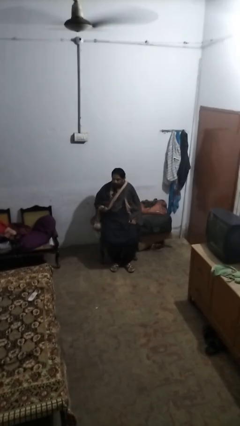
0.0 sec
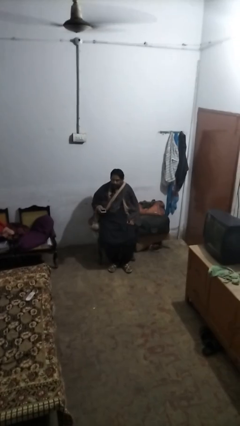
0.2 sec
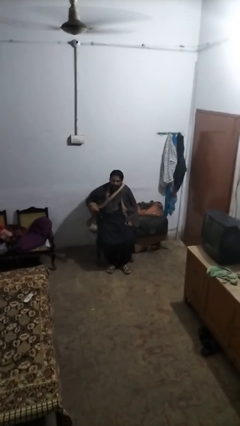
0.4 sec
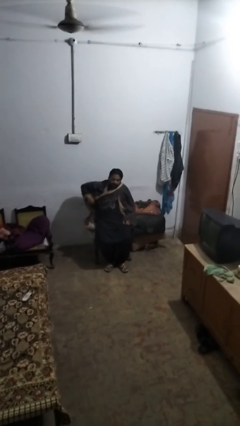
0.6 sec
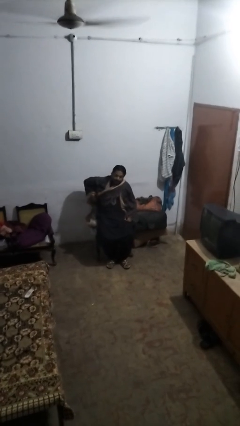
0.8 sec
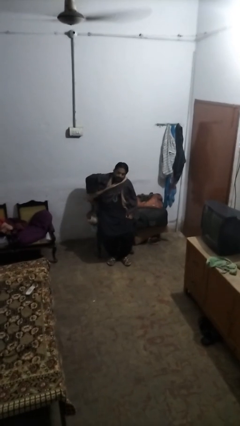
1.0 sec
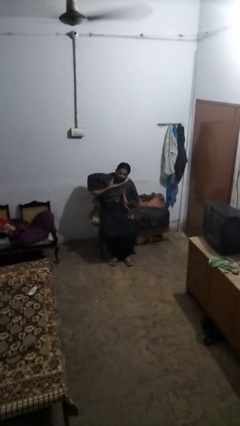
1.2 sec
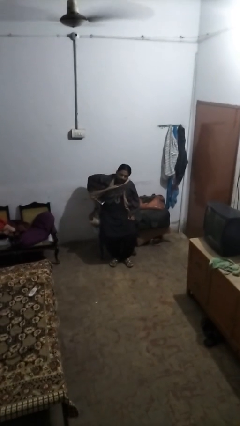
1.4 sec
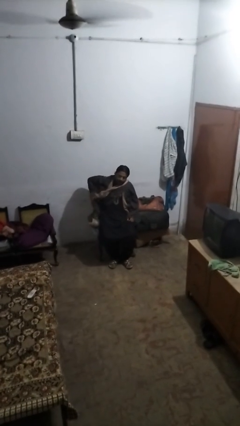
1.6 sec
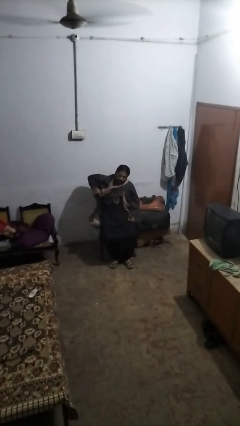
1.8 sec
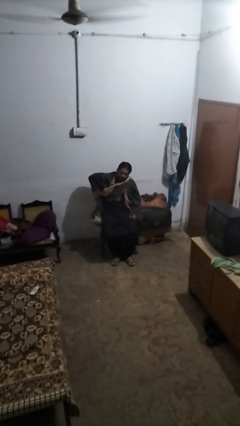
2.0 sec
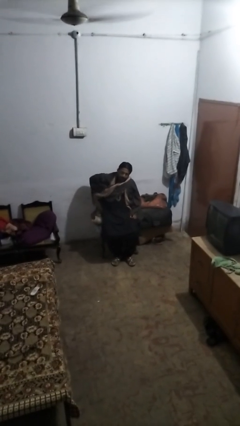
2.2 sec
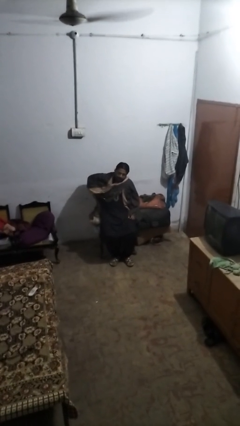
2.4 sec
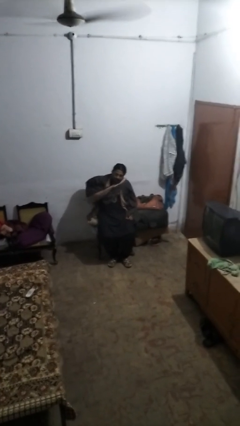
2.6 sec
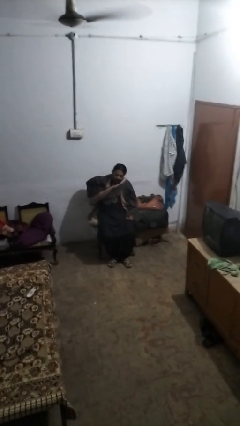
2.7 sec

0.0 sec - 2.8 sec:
person puts phone into pocket

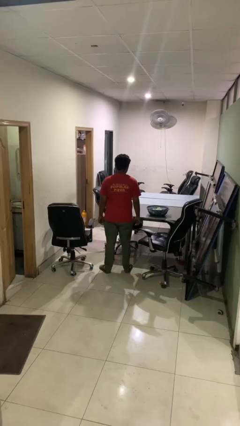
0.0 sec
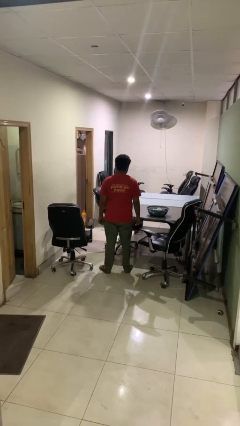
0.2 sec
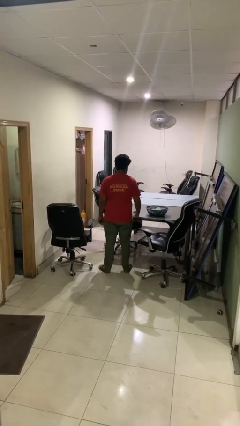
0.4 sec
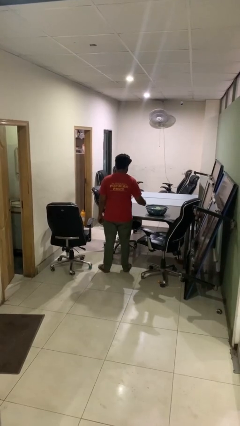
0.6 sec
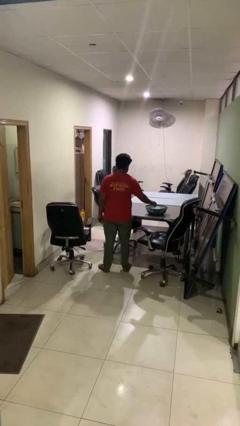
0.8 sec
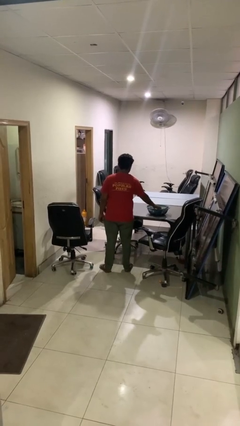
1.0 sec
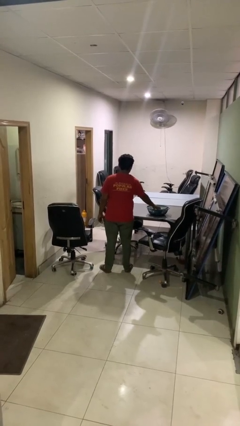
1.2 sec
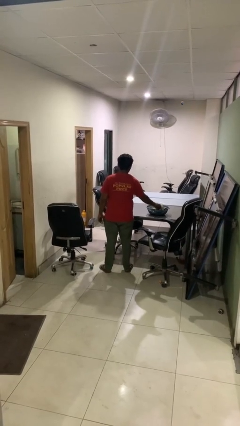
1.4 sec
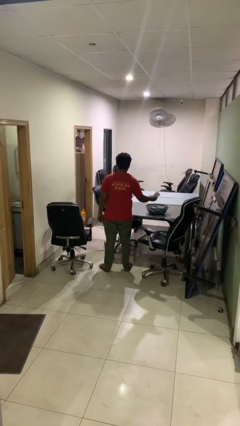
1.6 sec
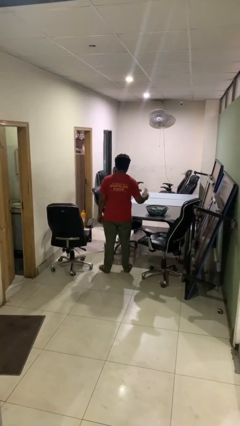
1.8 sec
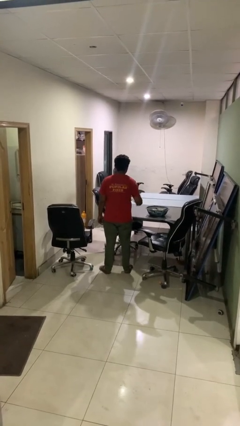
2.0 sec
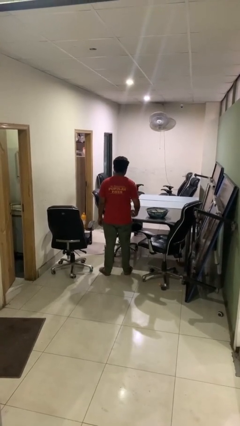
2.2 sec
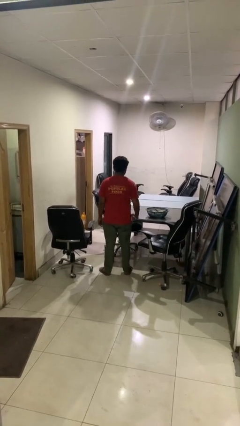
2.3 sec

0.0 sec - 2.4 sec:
person takes object from basket

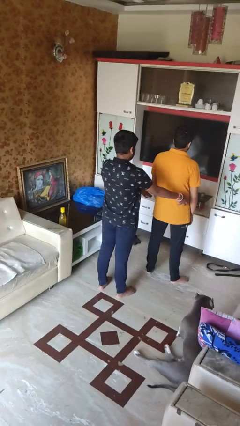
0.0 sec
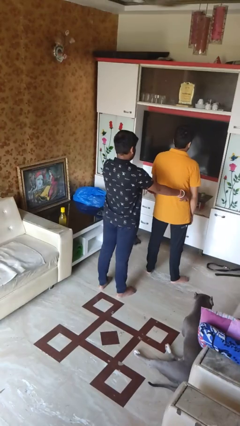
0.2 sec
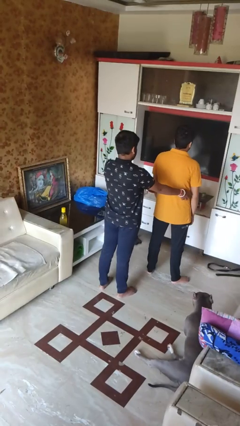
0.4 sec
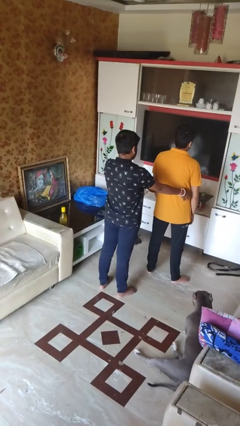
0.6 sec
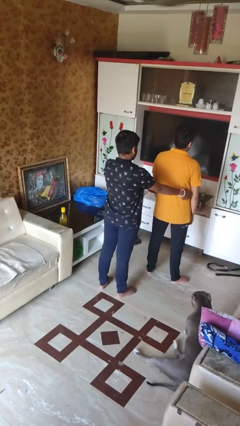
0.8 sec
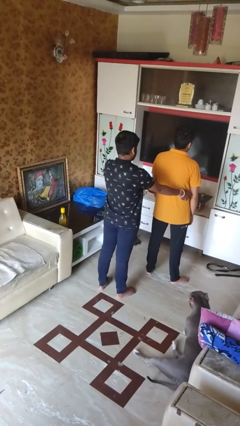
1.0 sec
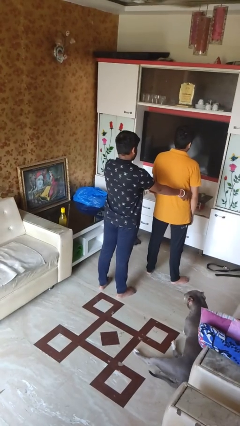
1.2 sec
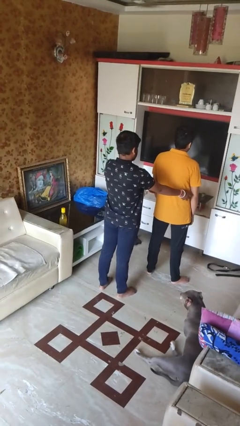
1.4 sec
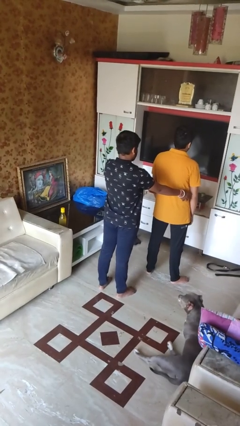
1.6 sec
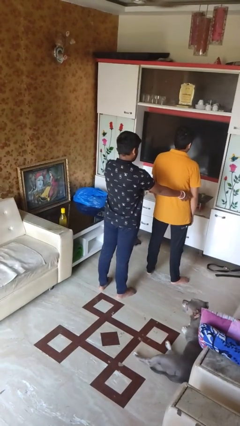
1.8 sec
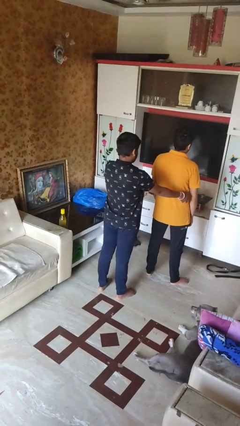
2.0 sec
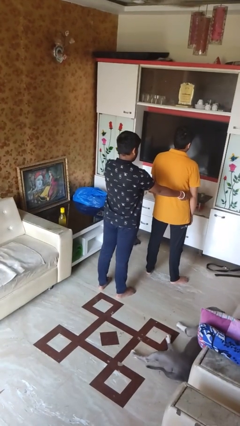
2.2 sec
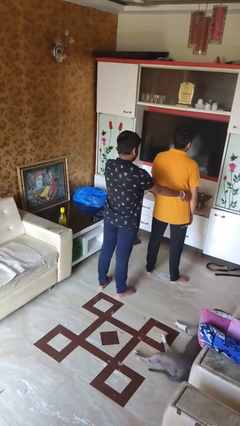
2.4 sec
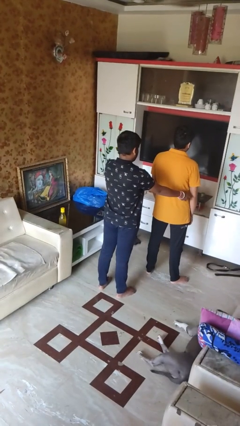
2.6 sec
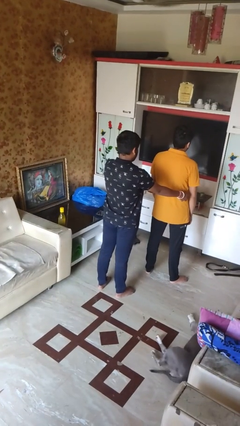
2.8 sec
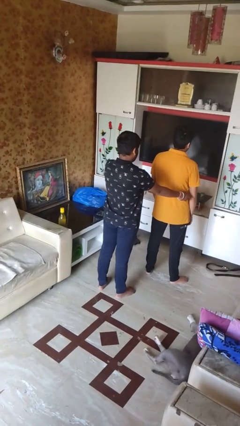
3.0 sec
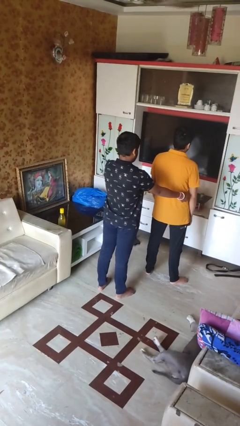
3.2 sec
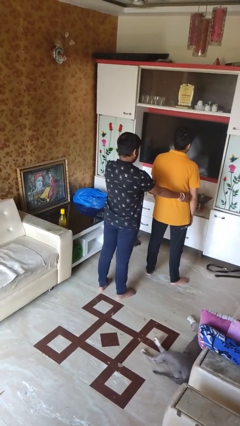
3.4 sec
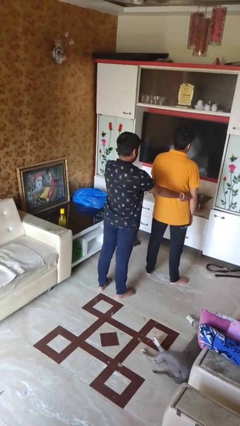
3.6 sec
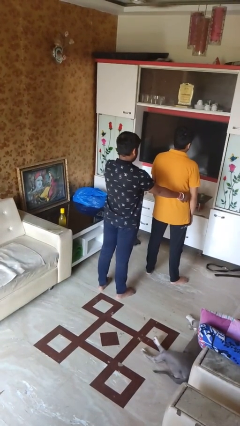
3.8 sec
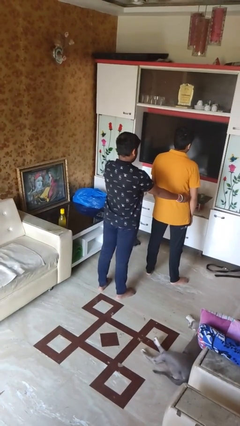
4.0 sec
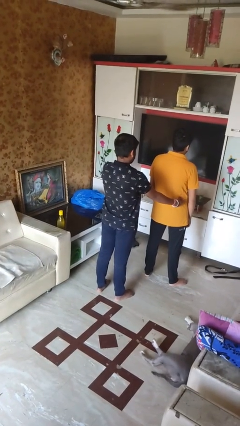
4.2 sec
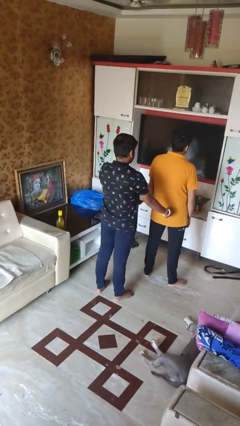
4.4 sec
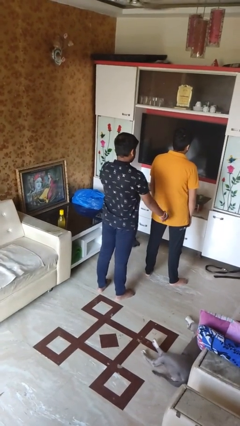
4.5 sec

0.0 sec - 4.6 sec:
person tickles person

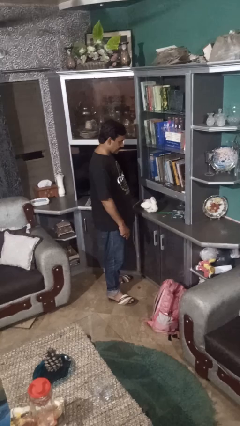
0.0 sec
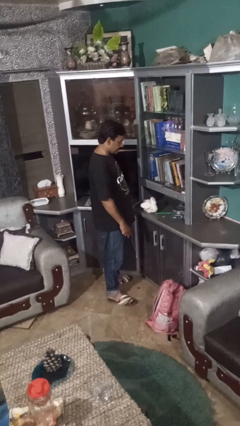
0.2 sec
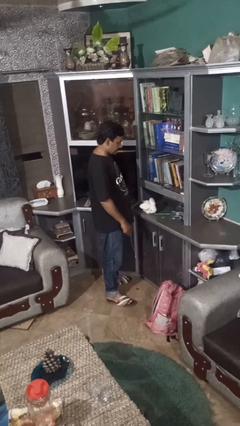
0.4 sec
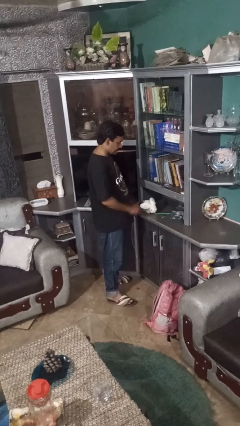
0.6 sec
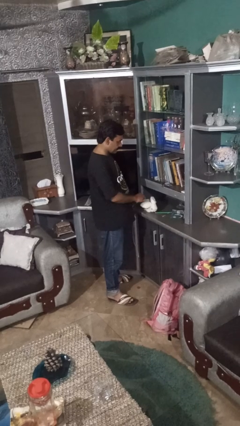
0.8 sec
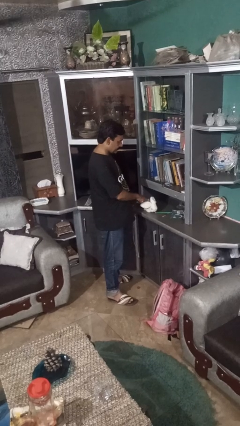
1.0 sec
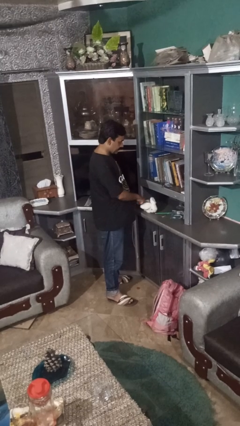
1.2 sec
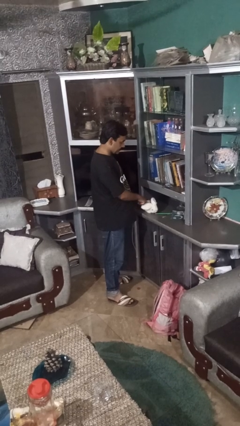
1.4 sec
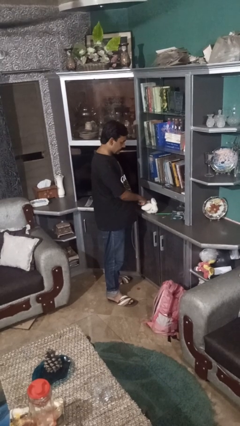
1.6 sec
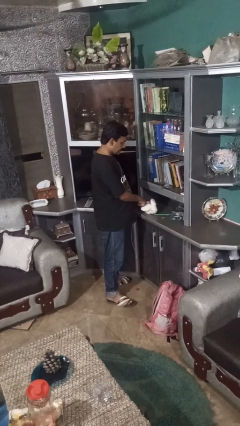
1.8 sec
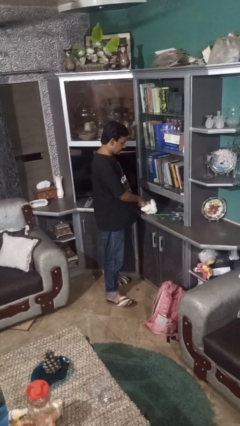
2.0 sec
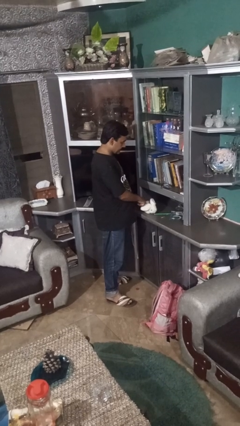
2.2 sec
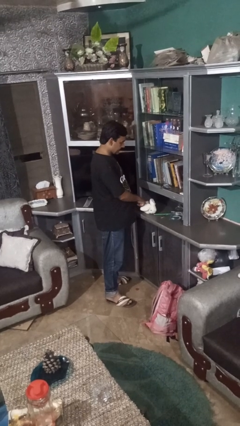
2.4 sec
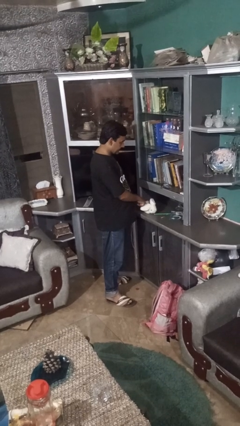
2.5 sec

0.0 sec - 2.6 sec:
person taps object with finger

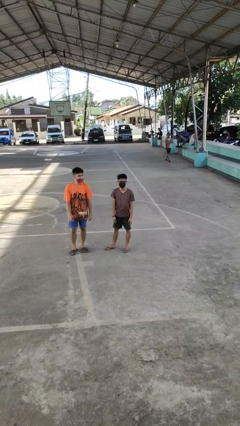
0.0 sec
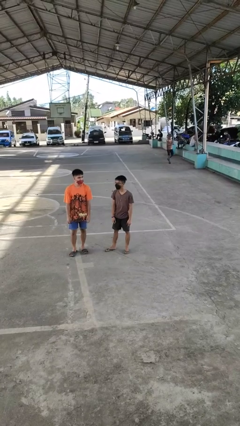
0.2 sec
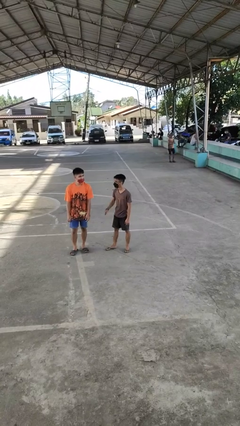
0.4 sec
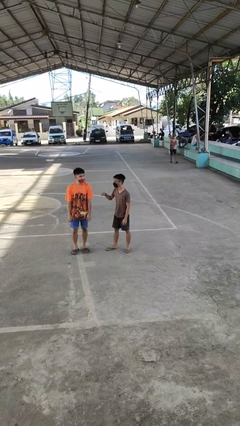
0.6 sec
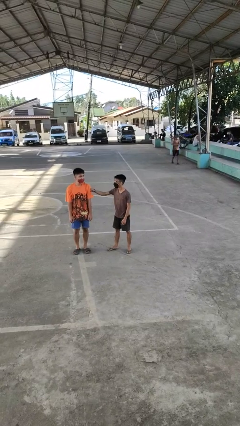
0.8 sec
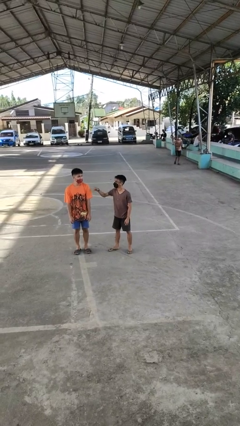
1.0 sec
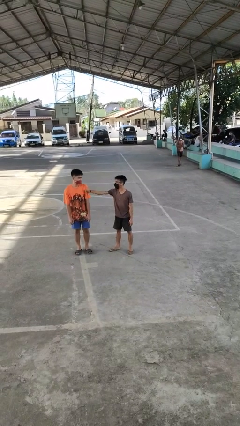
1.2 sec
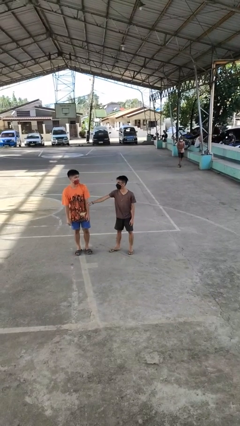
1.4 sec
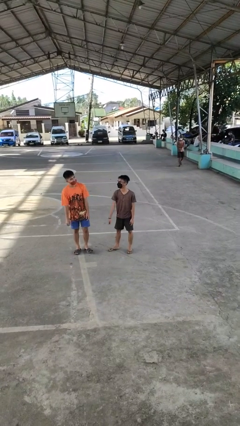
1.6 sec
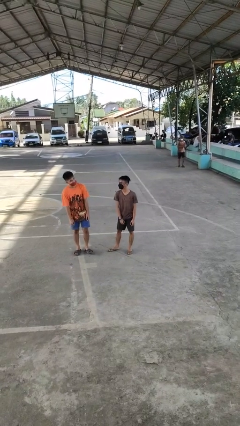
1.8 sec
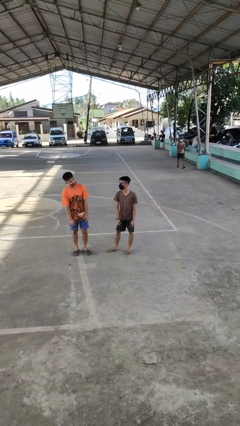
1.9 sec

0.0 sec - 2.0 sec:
person pounds shoulders of person

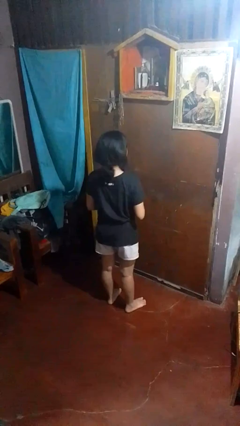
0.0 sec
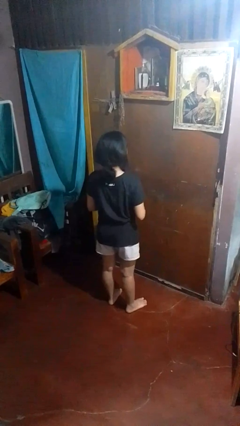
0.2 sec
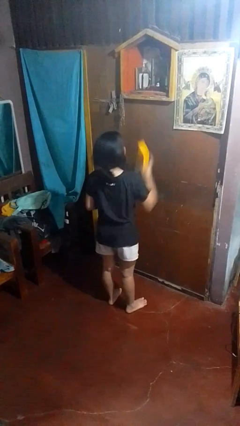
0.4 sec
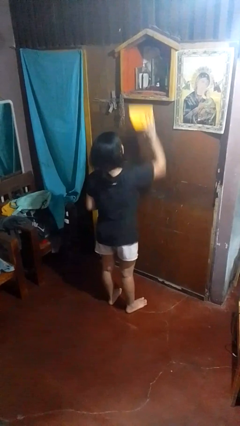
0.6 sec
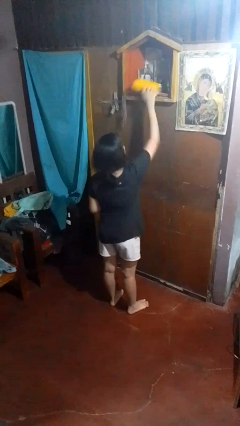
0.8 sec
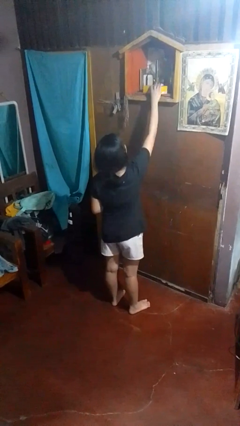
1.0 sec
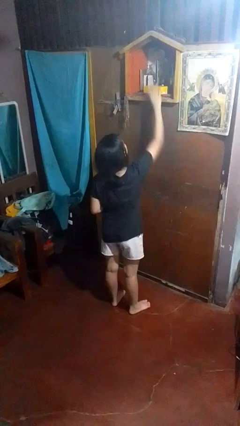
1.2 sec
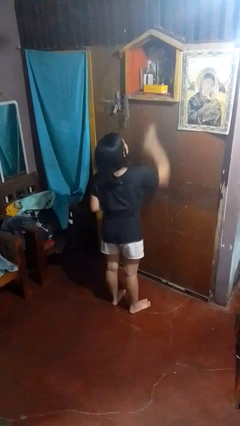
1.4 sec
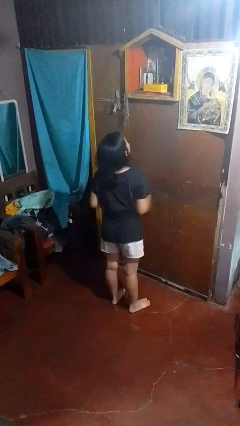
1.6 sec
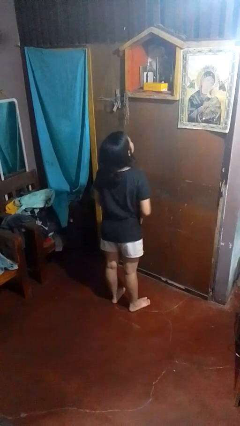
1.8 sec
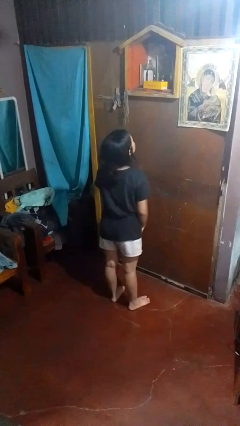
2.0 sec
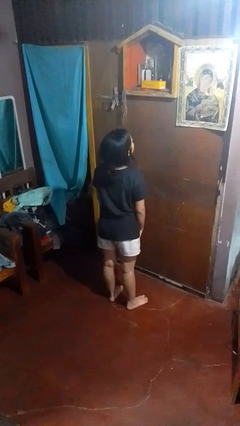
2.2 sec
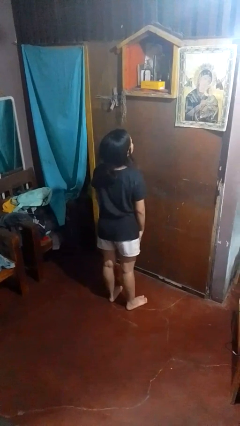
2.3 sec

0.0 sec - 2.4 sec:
person puts down object on shelf

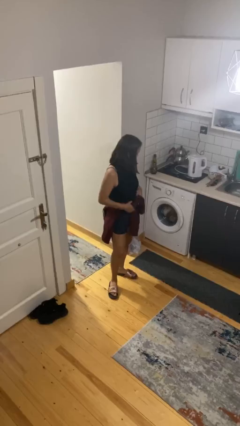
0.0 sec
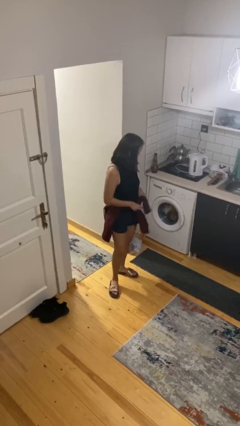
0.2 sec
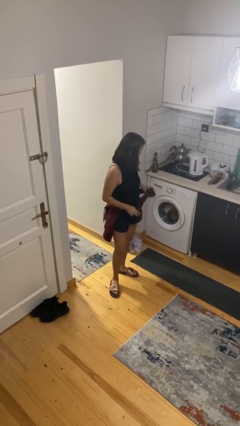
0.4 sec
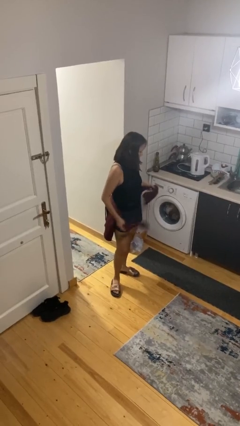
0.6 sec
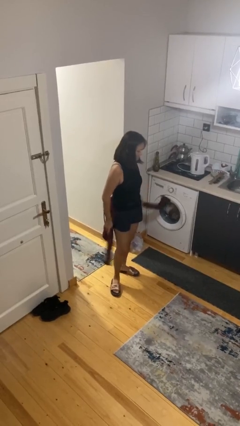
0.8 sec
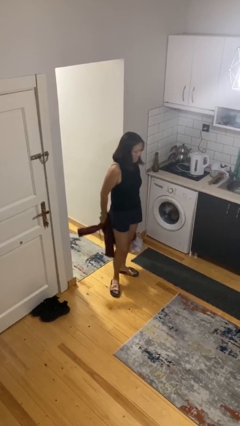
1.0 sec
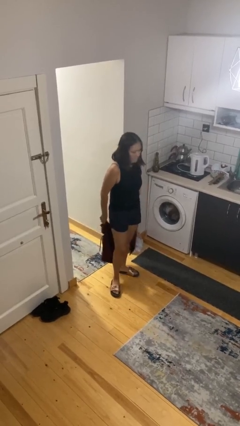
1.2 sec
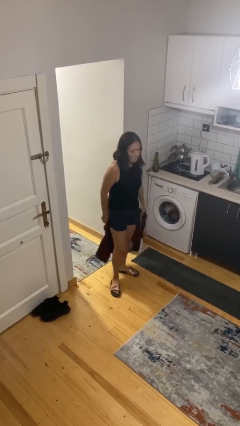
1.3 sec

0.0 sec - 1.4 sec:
person unties jacket around waist
